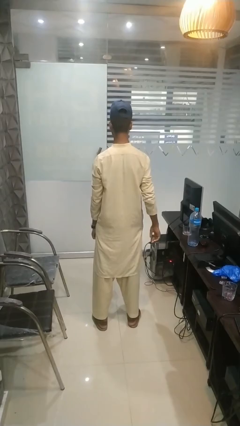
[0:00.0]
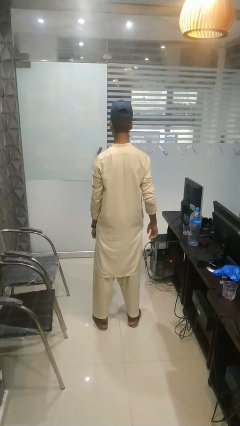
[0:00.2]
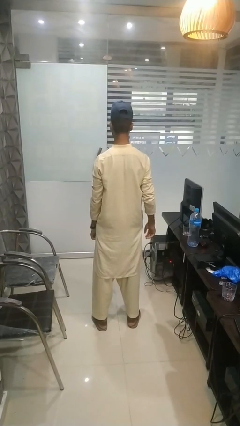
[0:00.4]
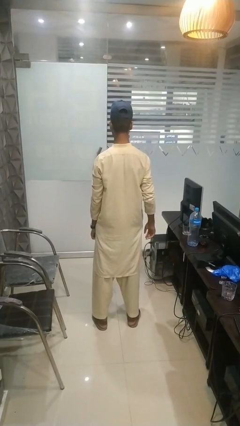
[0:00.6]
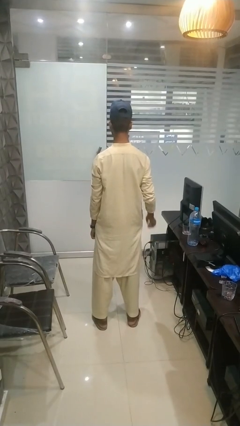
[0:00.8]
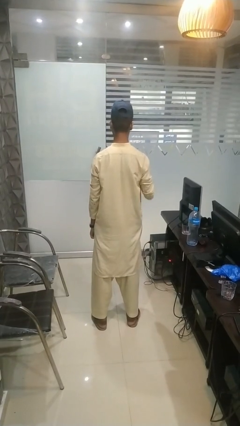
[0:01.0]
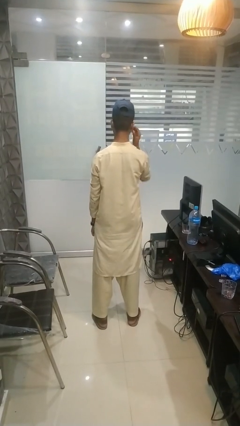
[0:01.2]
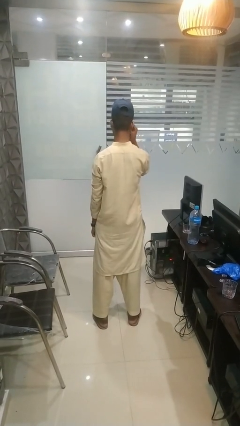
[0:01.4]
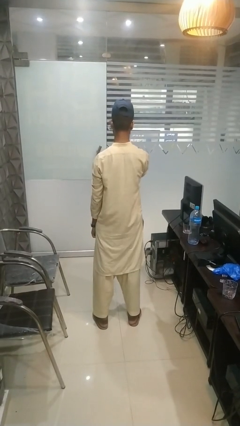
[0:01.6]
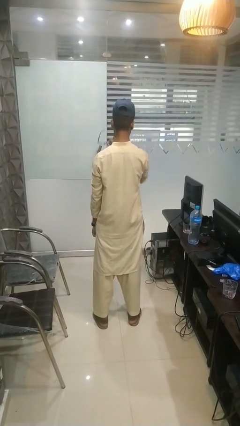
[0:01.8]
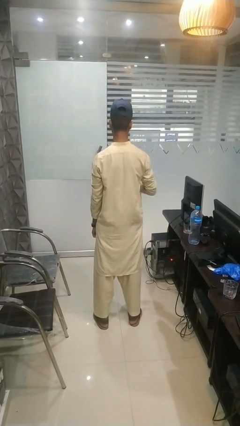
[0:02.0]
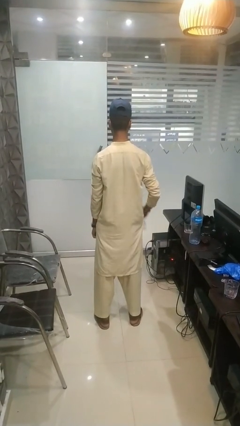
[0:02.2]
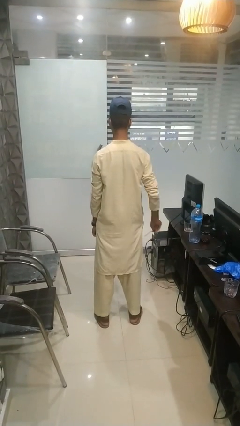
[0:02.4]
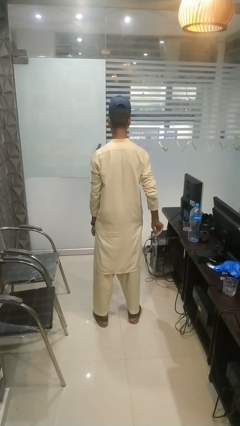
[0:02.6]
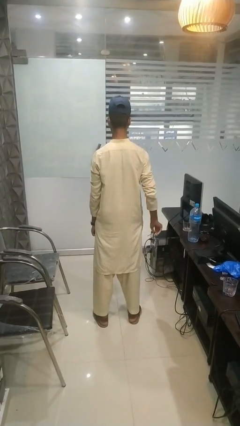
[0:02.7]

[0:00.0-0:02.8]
person takes off glasses

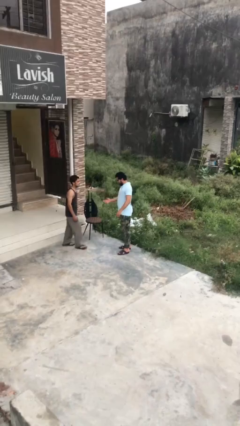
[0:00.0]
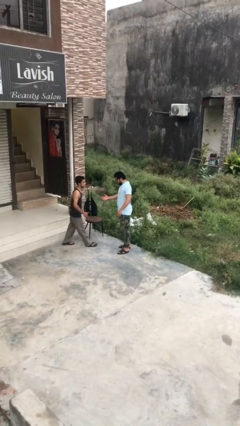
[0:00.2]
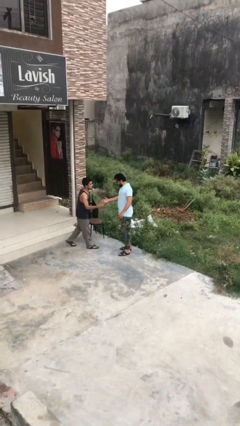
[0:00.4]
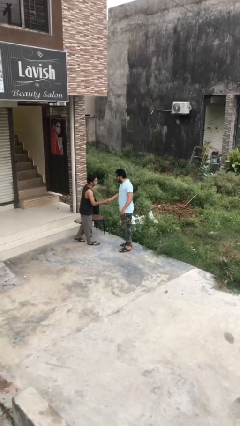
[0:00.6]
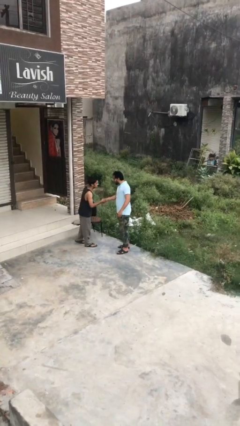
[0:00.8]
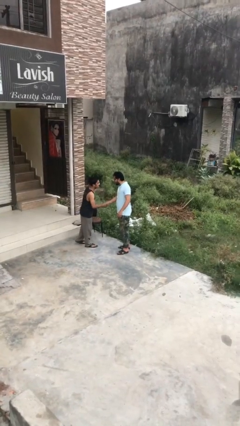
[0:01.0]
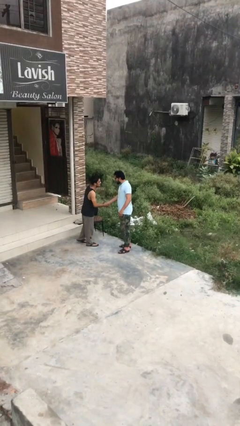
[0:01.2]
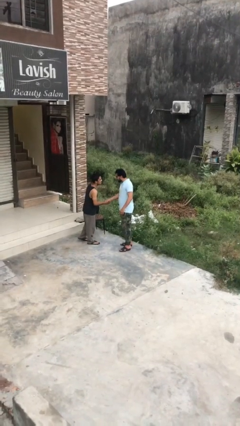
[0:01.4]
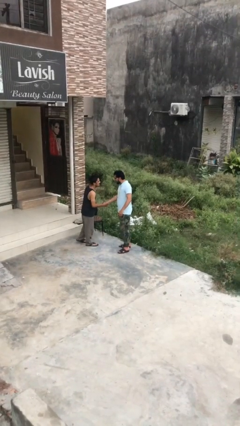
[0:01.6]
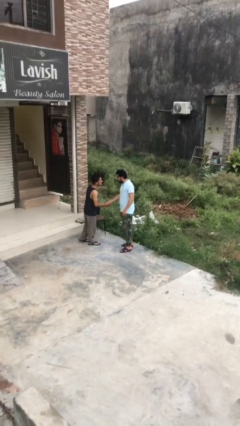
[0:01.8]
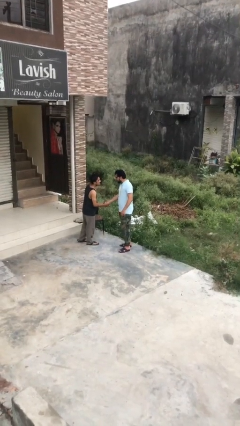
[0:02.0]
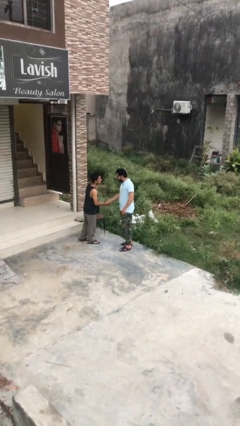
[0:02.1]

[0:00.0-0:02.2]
person shakes hand

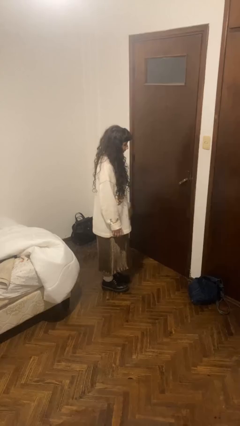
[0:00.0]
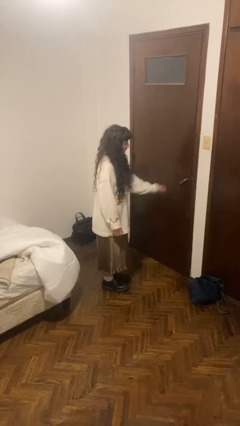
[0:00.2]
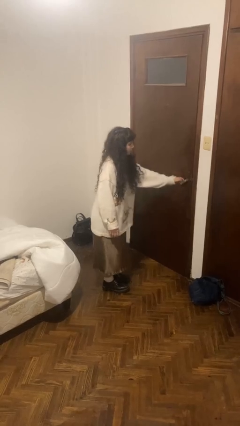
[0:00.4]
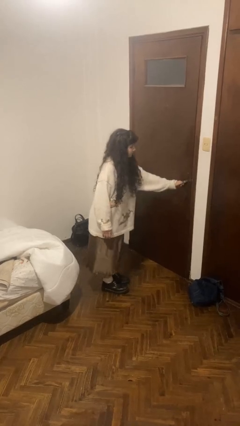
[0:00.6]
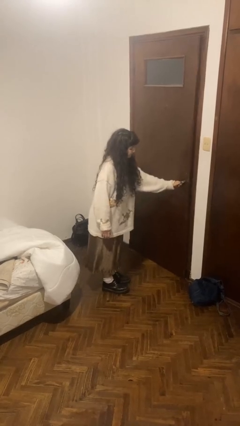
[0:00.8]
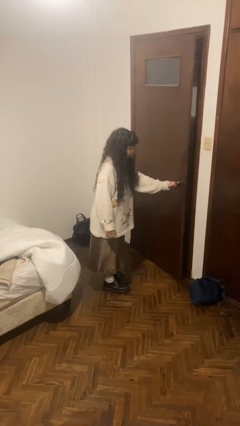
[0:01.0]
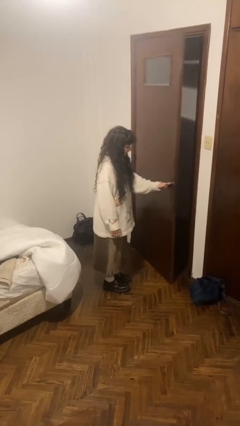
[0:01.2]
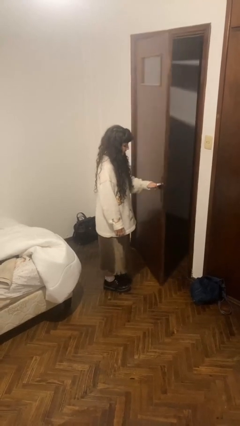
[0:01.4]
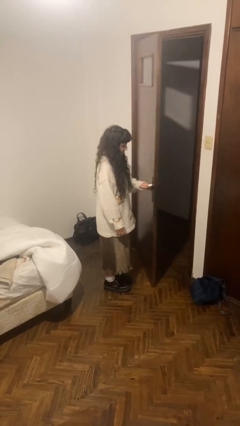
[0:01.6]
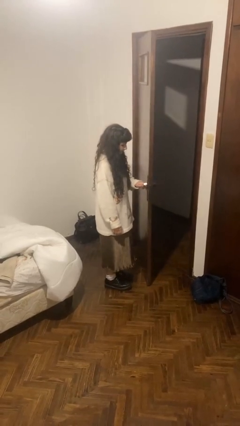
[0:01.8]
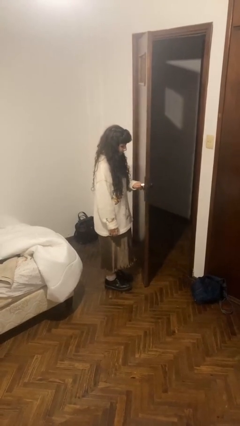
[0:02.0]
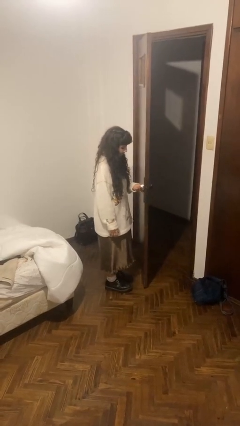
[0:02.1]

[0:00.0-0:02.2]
person opens facility door

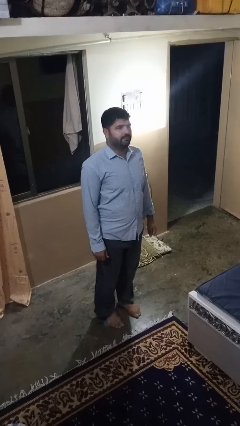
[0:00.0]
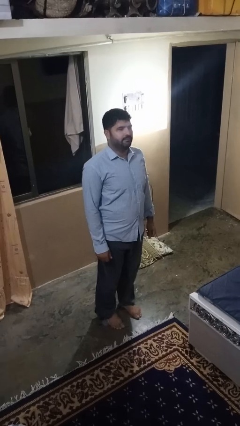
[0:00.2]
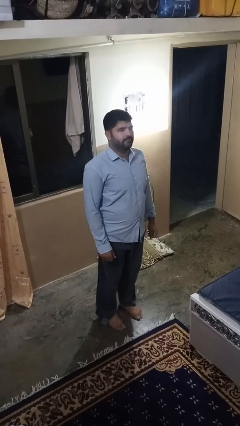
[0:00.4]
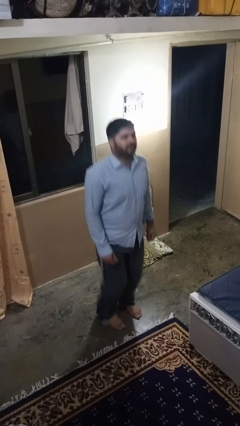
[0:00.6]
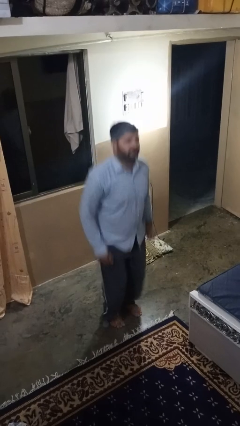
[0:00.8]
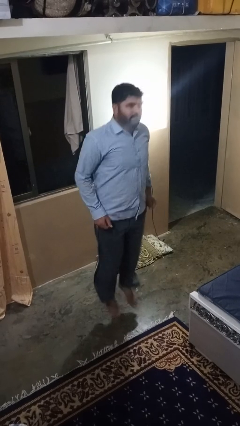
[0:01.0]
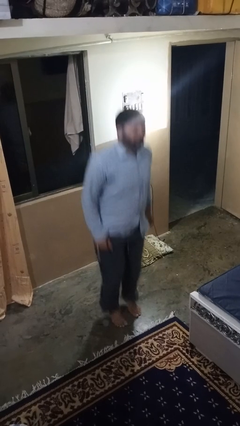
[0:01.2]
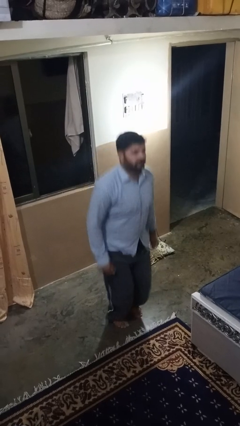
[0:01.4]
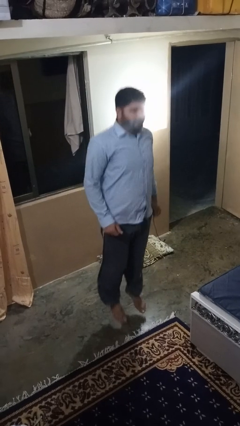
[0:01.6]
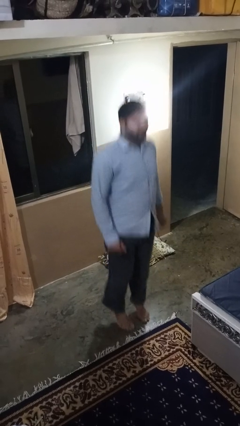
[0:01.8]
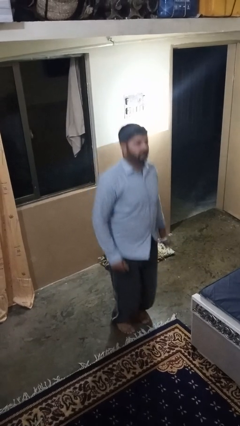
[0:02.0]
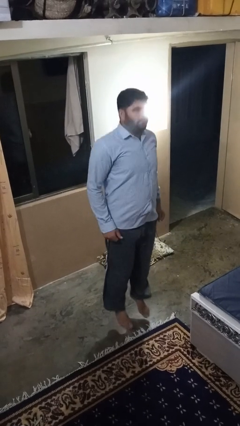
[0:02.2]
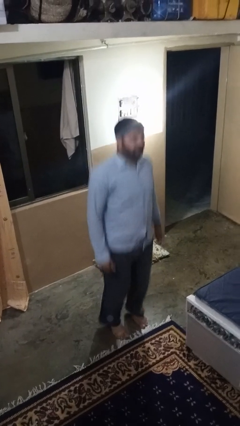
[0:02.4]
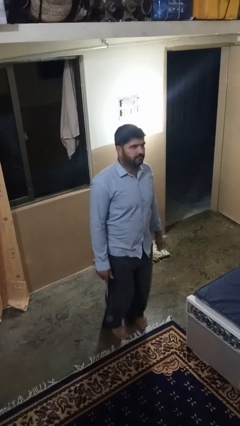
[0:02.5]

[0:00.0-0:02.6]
person jumps

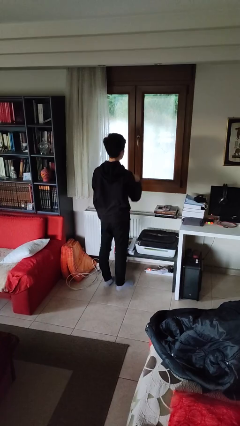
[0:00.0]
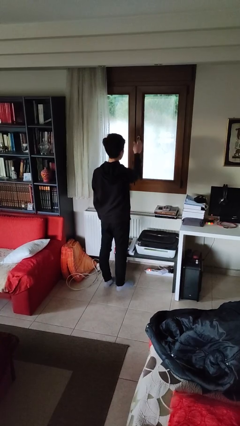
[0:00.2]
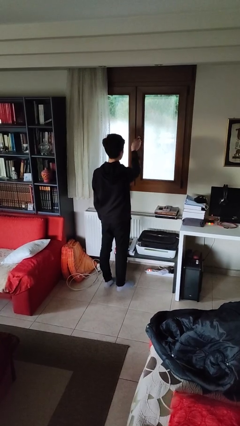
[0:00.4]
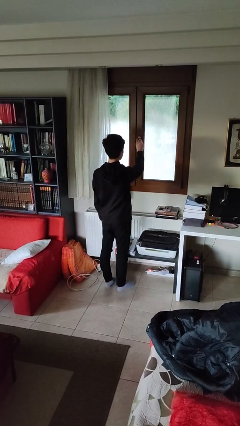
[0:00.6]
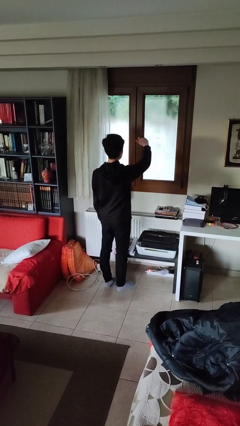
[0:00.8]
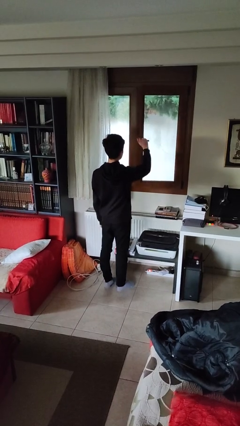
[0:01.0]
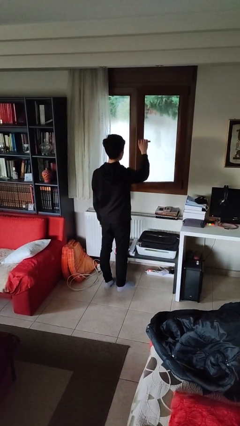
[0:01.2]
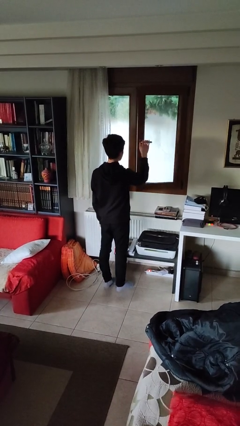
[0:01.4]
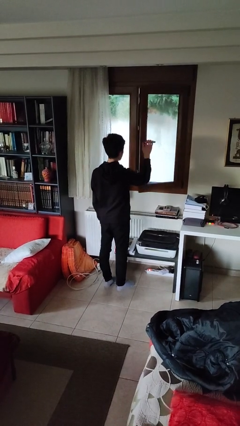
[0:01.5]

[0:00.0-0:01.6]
person opens home window

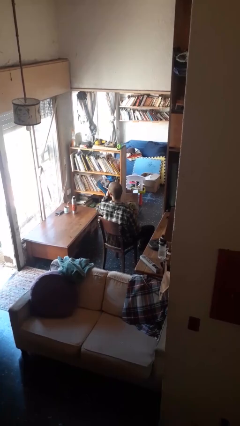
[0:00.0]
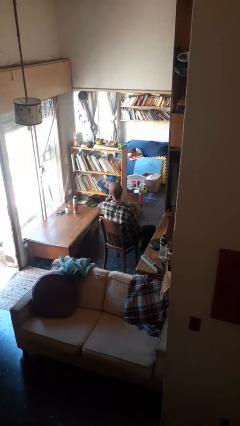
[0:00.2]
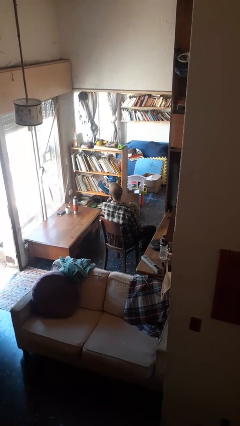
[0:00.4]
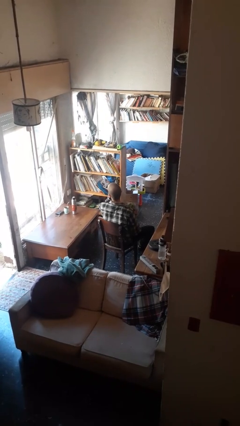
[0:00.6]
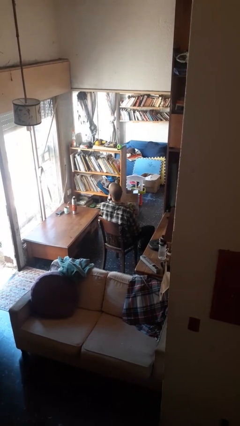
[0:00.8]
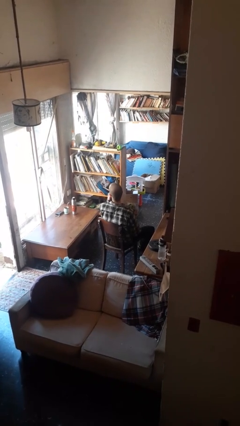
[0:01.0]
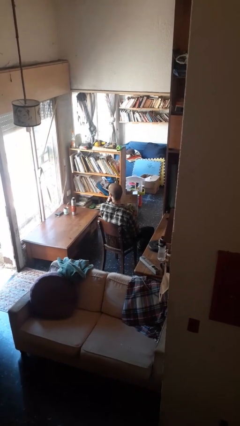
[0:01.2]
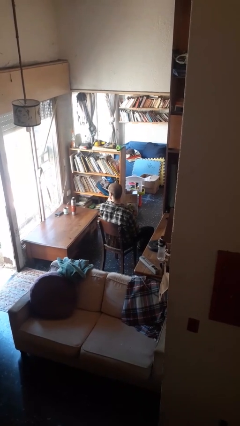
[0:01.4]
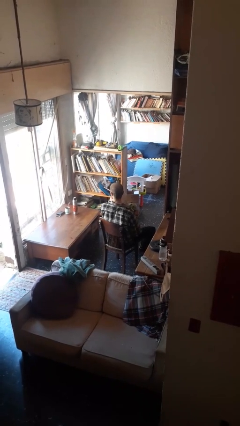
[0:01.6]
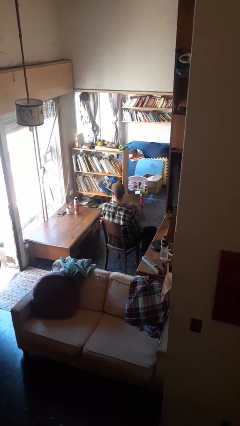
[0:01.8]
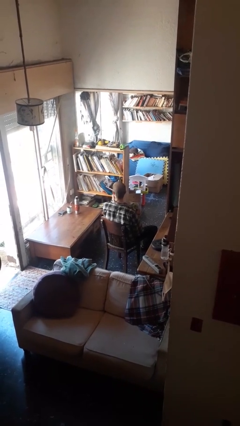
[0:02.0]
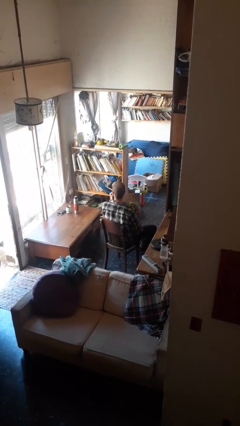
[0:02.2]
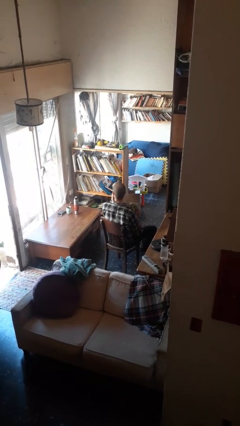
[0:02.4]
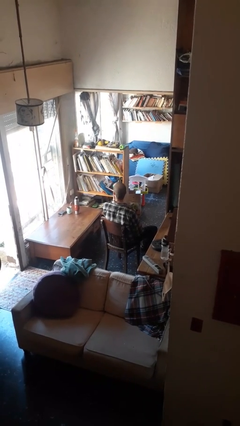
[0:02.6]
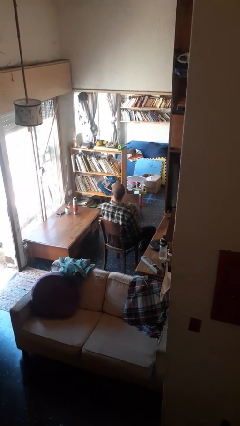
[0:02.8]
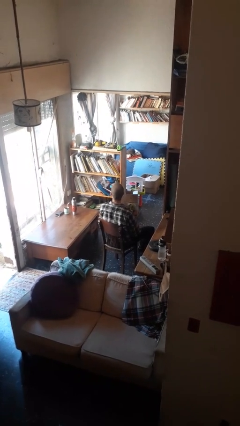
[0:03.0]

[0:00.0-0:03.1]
person strokes chin

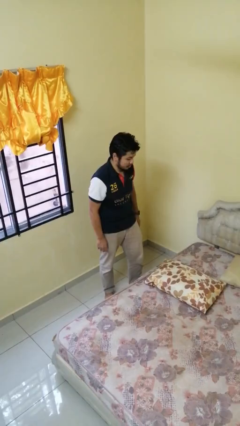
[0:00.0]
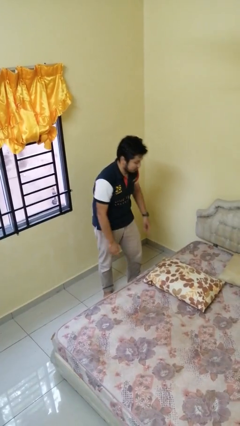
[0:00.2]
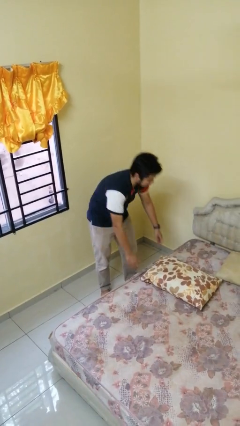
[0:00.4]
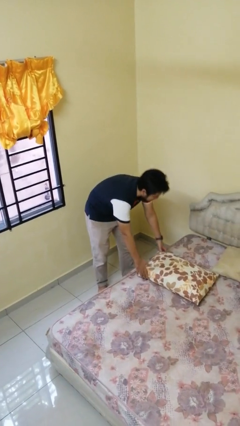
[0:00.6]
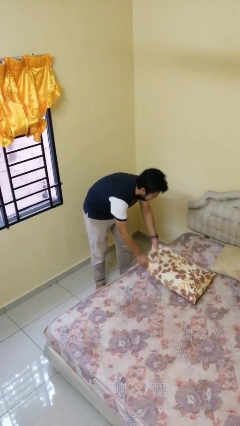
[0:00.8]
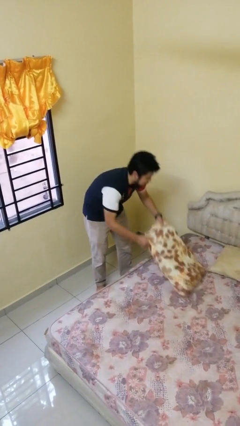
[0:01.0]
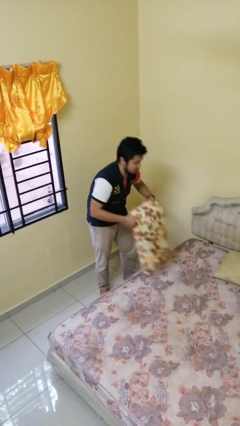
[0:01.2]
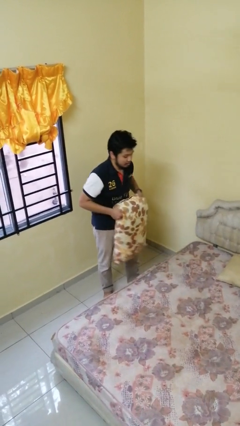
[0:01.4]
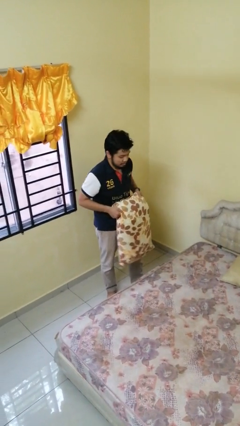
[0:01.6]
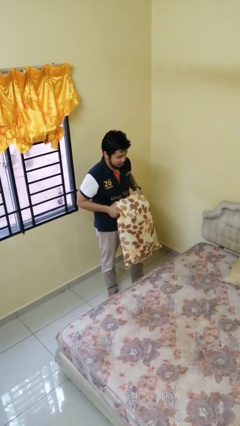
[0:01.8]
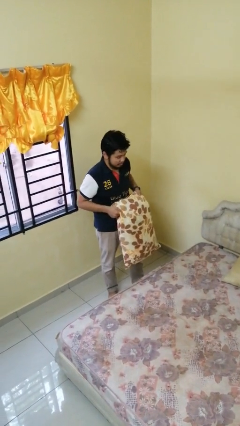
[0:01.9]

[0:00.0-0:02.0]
person picks up object from bed

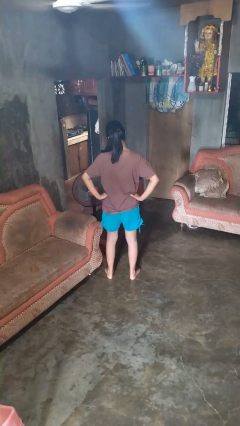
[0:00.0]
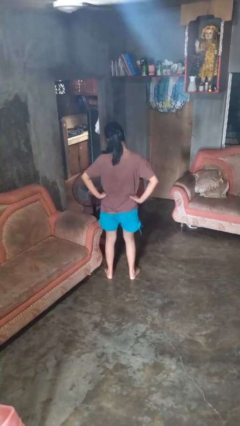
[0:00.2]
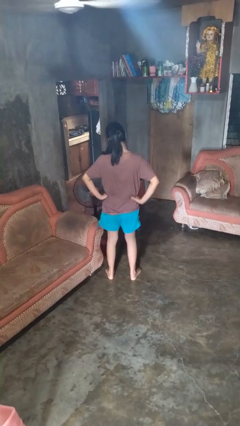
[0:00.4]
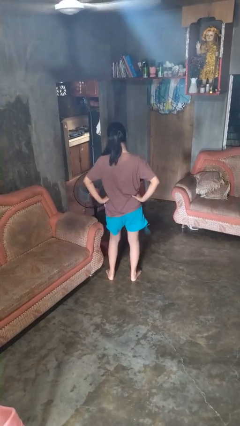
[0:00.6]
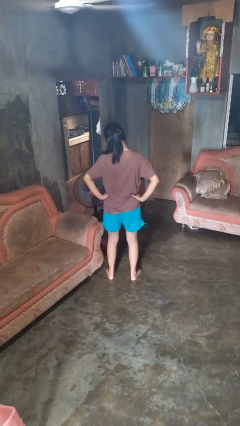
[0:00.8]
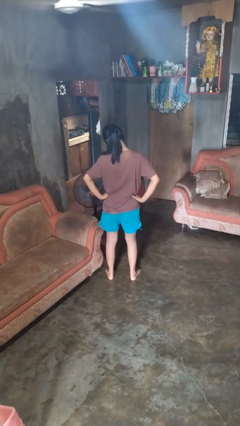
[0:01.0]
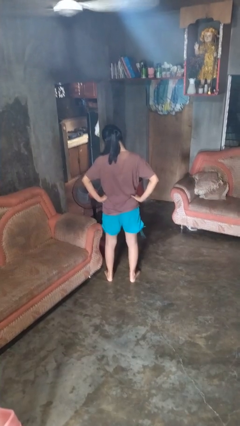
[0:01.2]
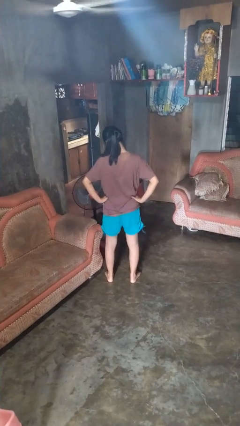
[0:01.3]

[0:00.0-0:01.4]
person wiggles hips
